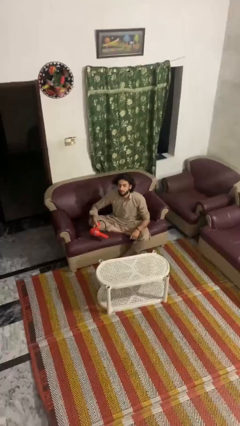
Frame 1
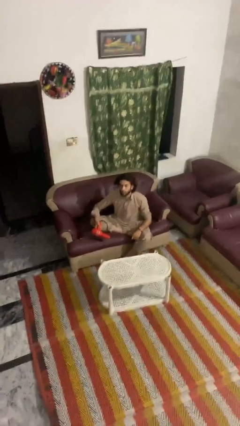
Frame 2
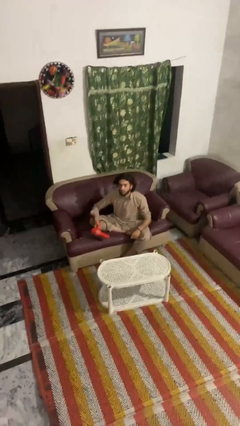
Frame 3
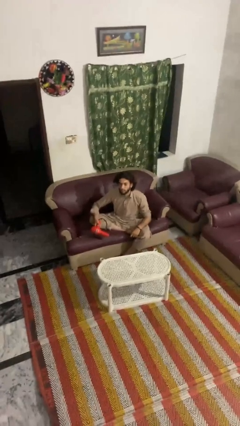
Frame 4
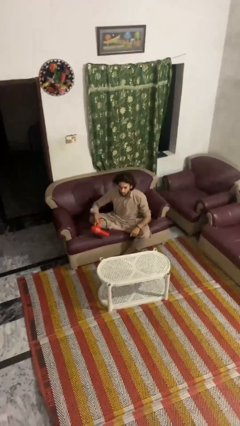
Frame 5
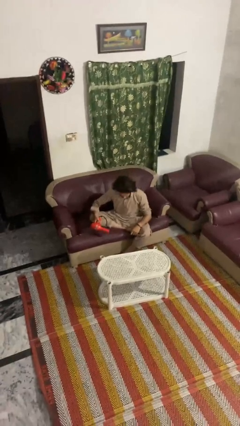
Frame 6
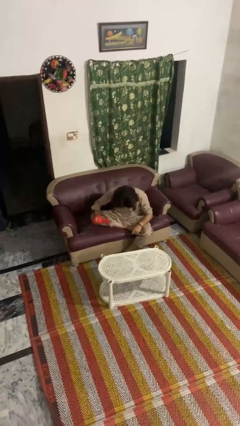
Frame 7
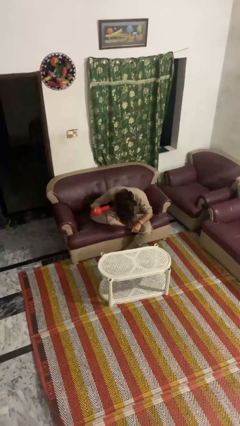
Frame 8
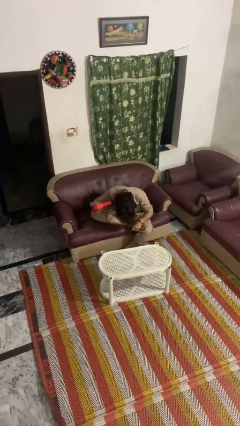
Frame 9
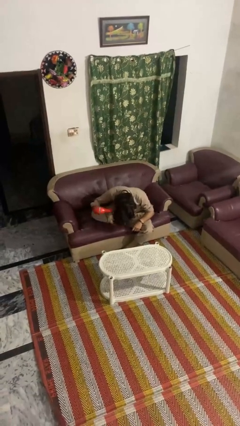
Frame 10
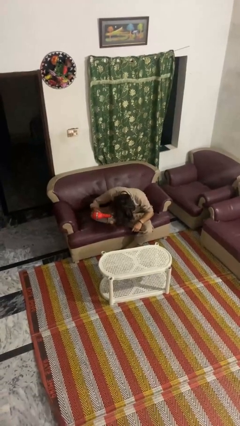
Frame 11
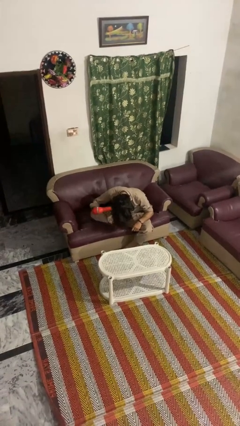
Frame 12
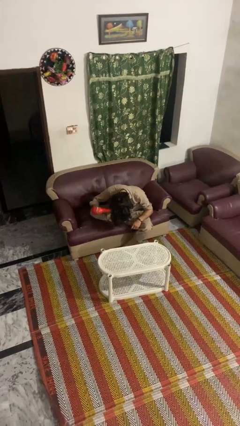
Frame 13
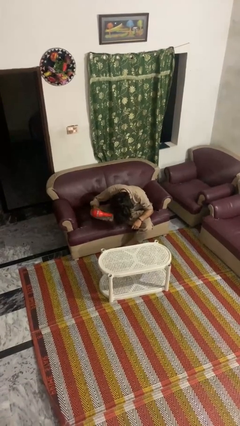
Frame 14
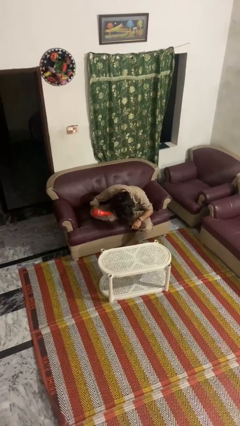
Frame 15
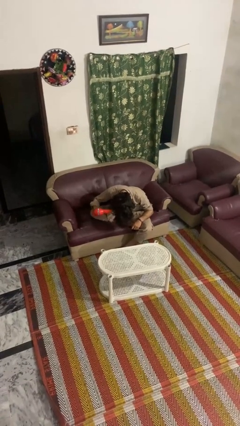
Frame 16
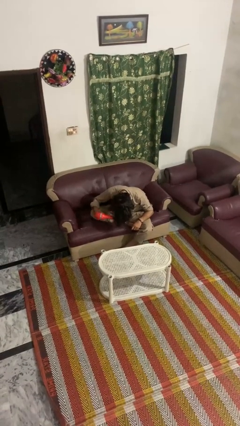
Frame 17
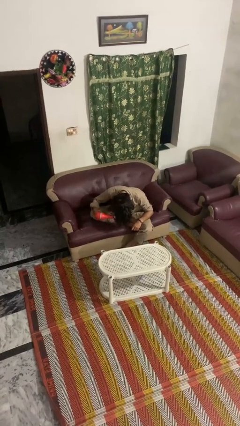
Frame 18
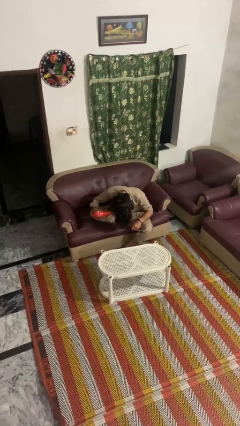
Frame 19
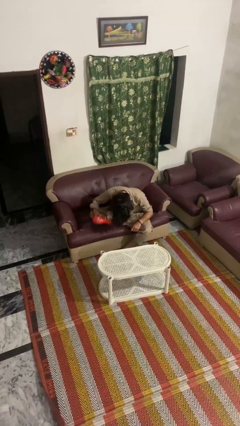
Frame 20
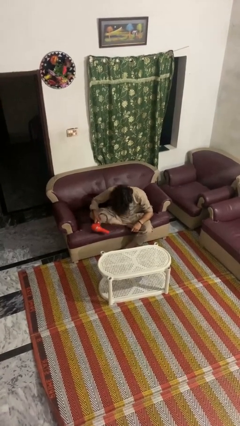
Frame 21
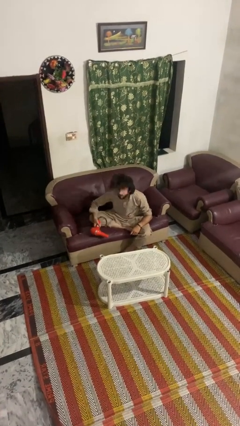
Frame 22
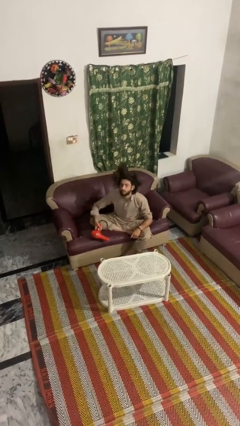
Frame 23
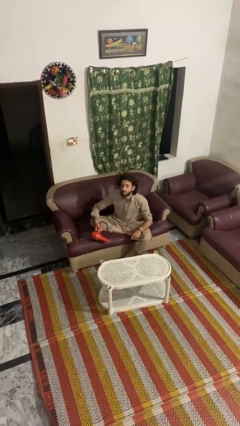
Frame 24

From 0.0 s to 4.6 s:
person dries hair with hairdryer

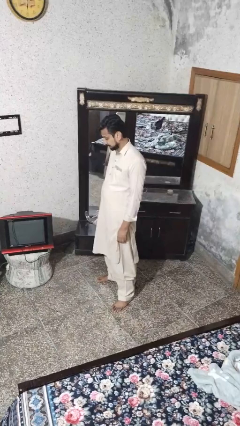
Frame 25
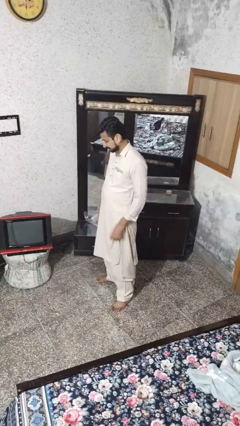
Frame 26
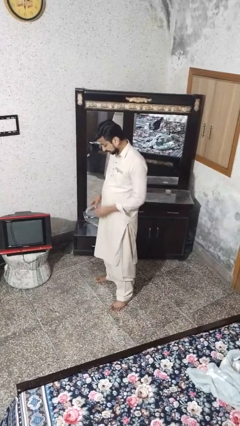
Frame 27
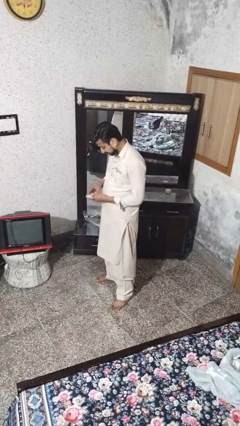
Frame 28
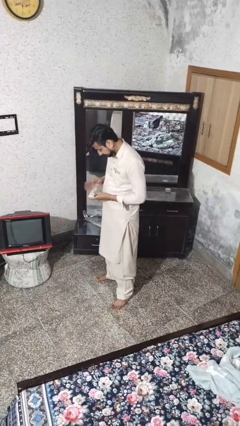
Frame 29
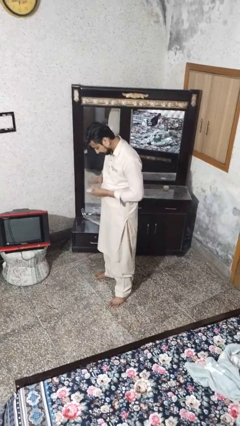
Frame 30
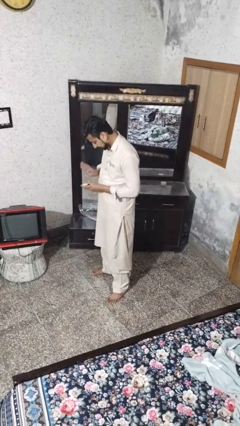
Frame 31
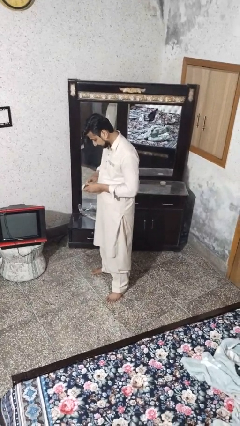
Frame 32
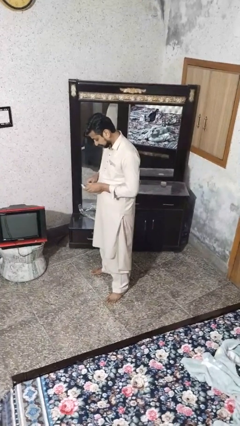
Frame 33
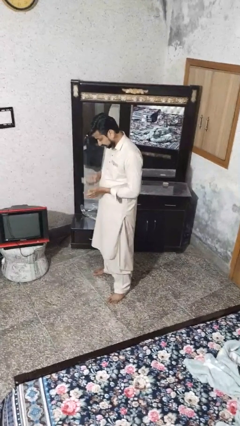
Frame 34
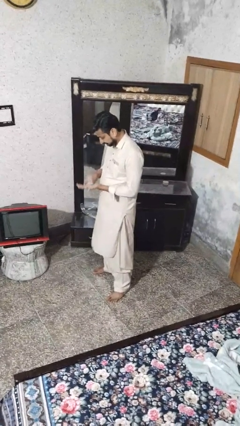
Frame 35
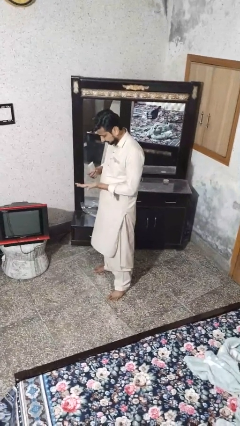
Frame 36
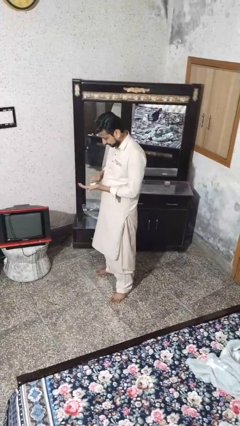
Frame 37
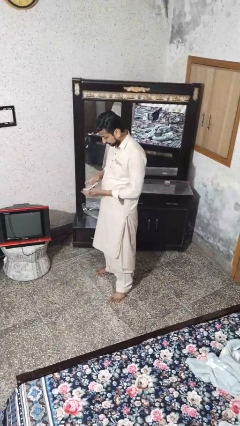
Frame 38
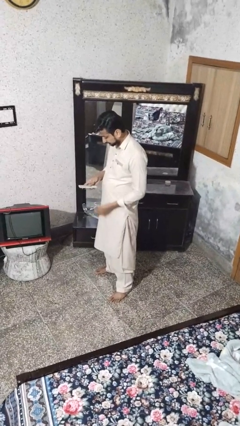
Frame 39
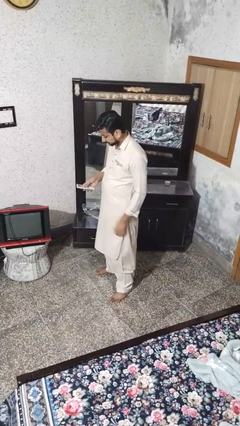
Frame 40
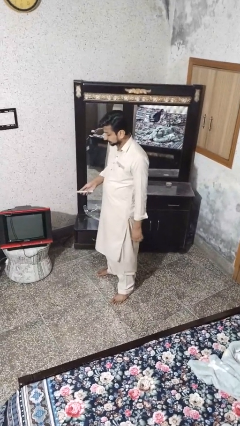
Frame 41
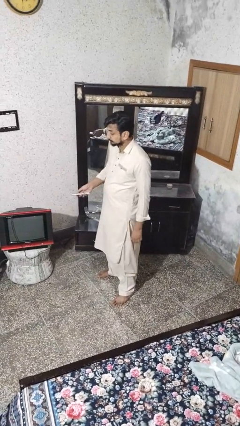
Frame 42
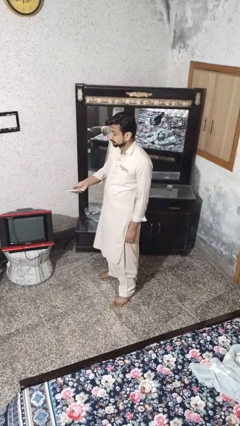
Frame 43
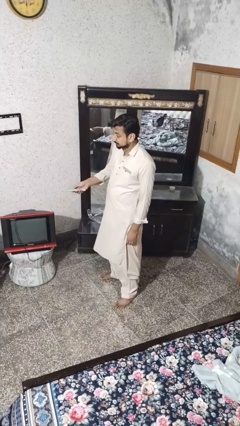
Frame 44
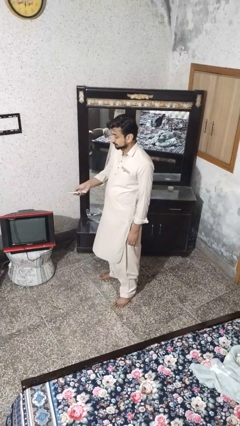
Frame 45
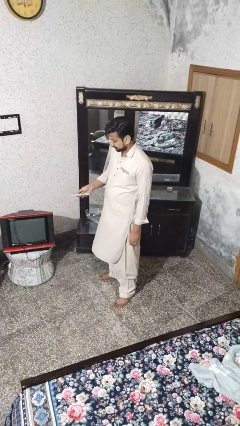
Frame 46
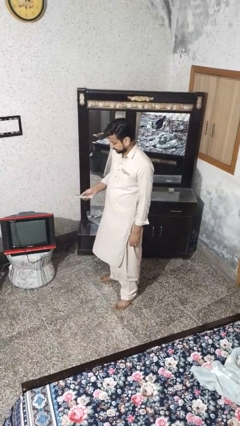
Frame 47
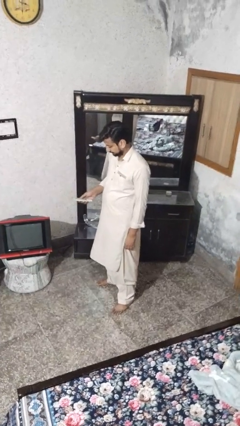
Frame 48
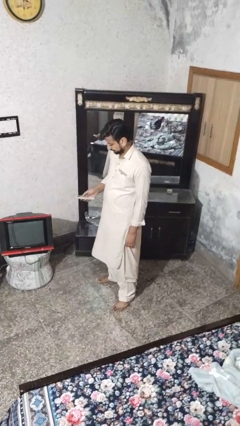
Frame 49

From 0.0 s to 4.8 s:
person uses television remote

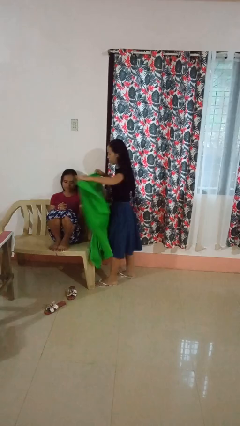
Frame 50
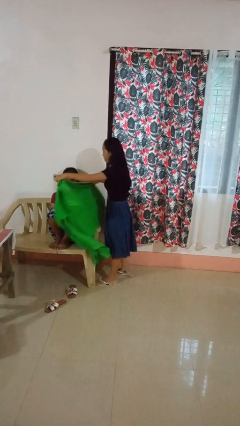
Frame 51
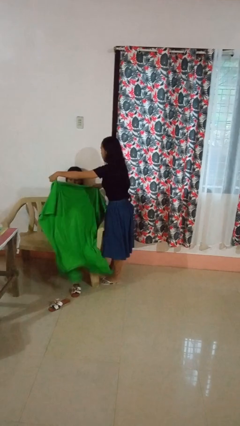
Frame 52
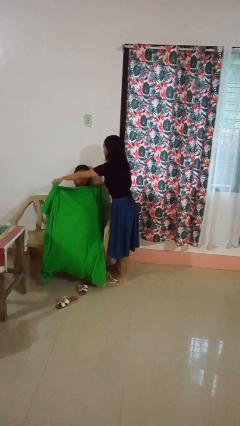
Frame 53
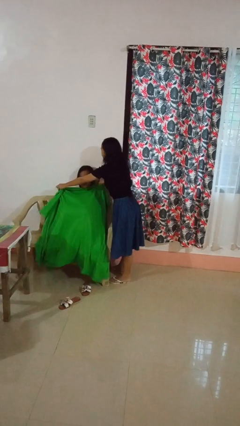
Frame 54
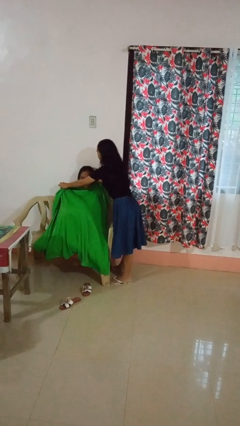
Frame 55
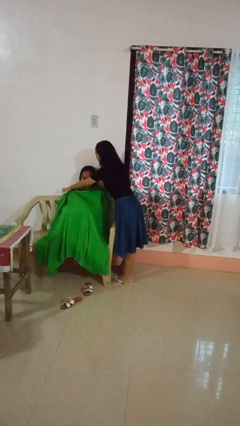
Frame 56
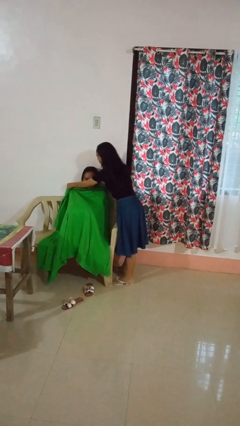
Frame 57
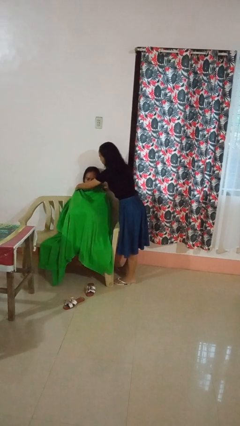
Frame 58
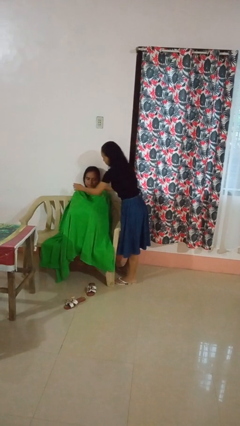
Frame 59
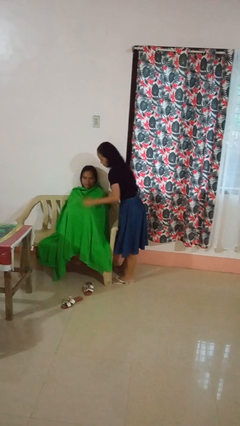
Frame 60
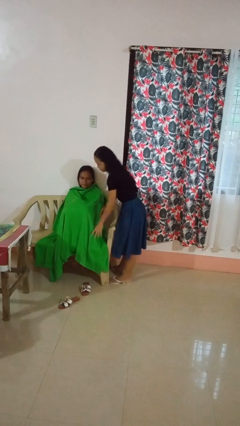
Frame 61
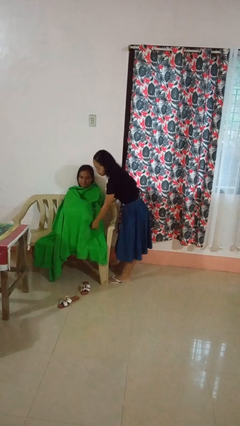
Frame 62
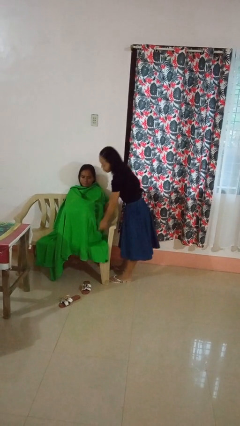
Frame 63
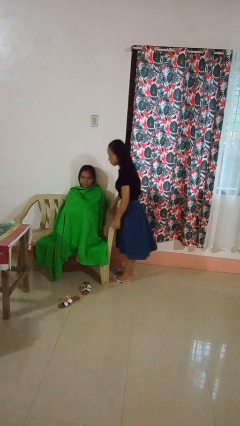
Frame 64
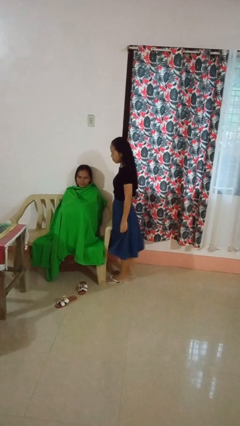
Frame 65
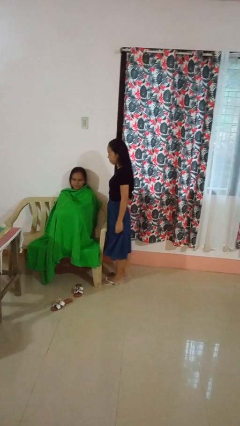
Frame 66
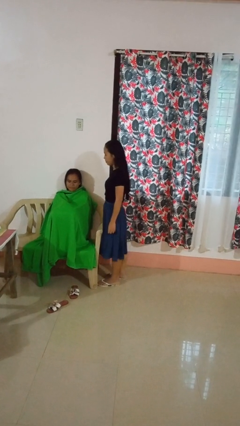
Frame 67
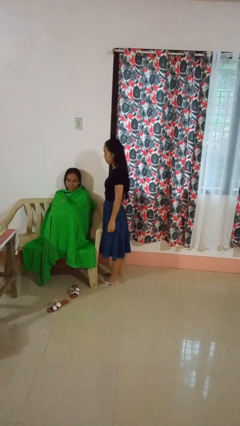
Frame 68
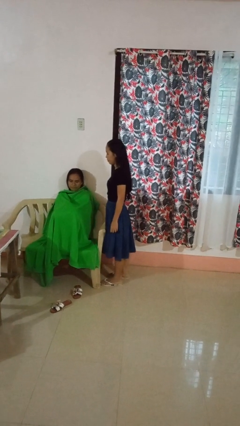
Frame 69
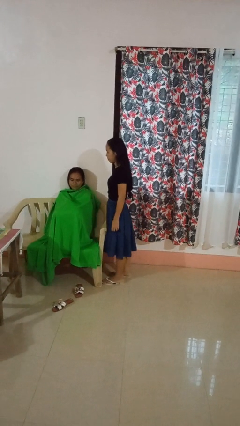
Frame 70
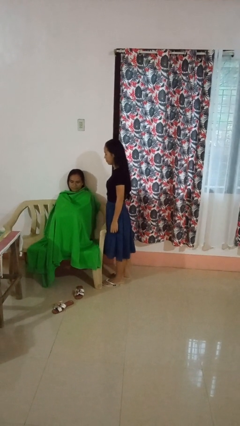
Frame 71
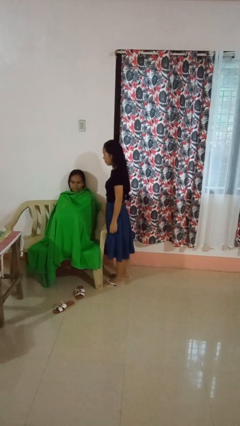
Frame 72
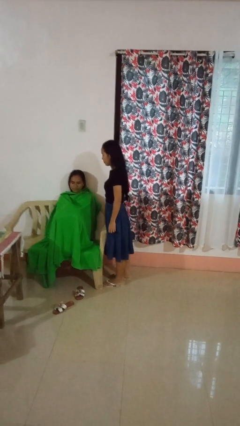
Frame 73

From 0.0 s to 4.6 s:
person covers friend with blanket

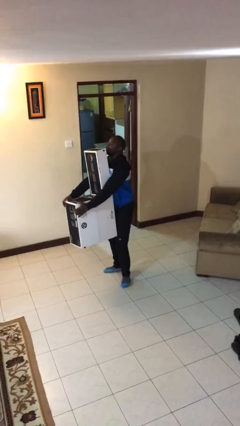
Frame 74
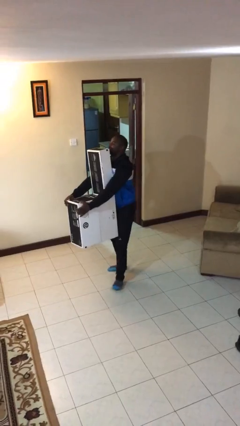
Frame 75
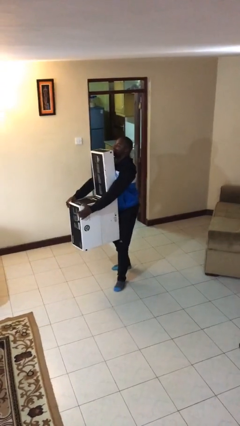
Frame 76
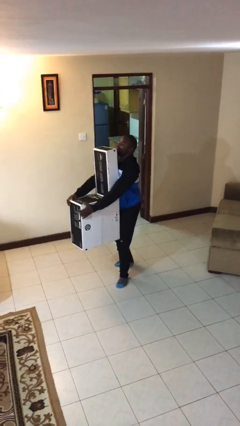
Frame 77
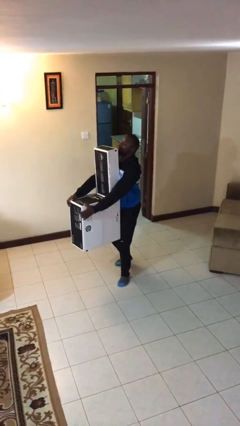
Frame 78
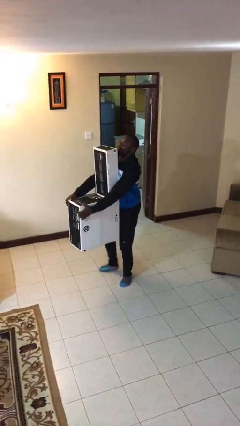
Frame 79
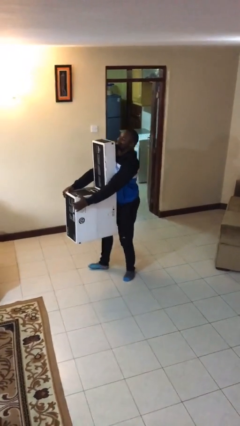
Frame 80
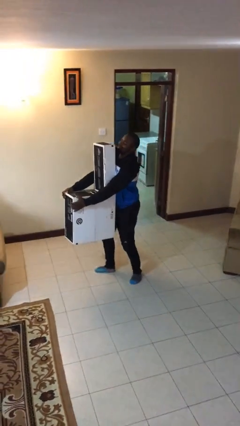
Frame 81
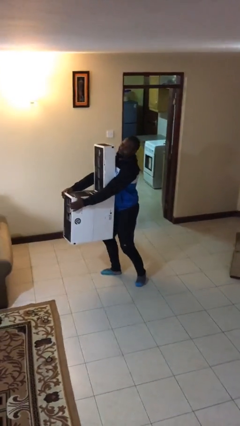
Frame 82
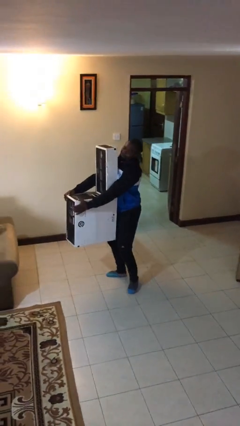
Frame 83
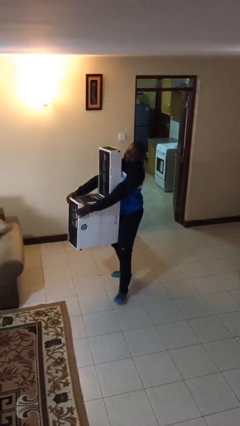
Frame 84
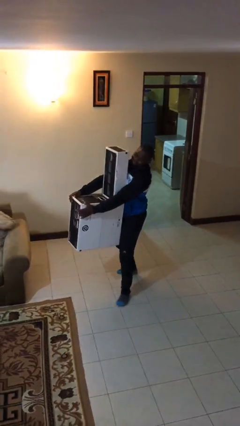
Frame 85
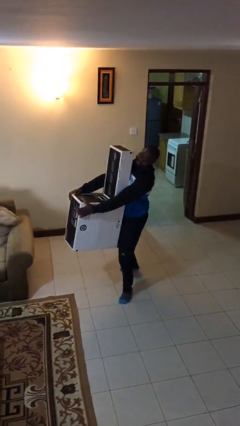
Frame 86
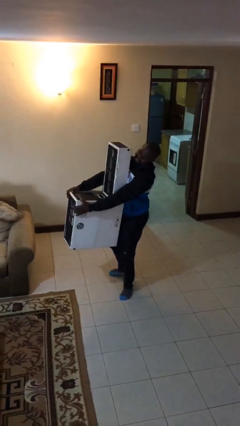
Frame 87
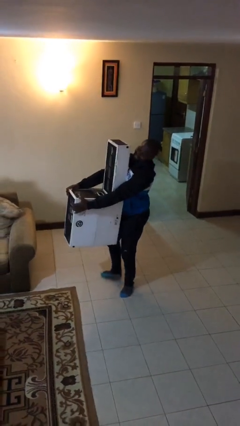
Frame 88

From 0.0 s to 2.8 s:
person carries heavy object

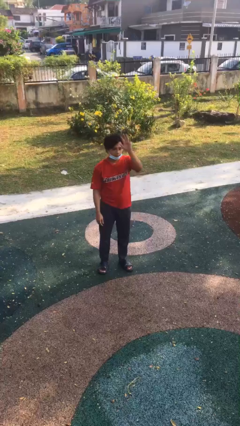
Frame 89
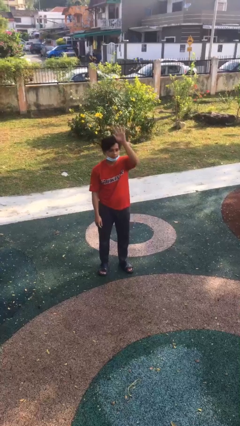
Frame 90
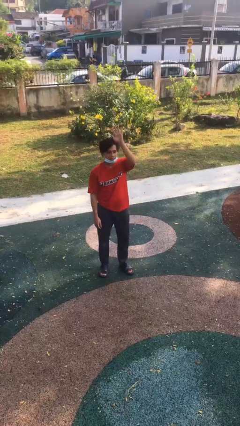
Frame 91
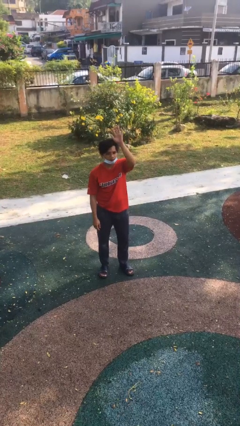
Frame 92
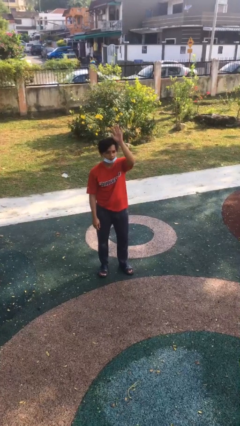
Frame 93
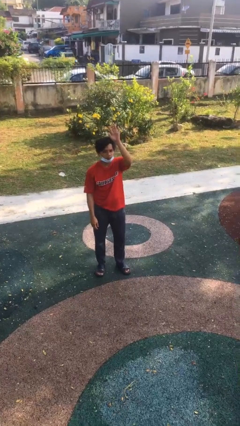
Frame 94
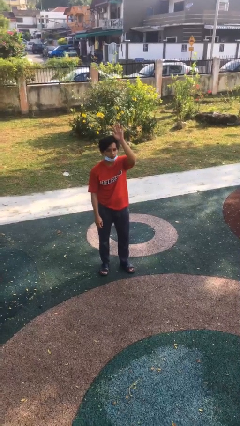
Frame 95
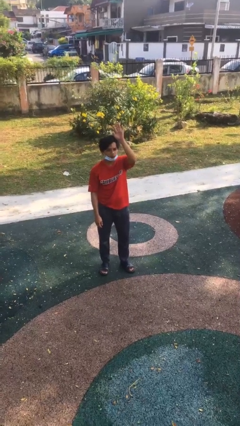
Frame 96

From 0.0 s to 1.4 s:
person gestures raise hand
